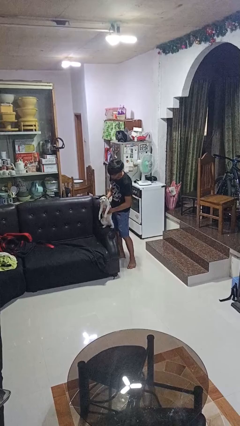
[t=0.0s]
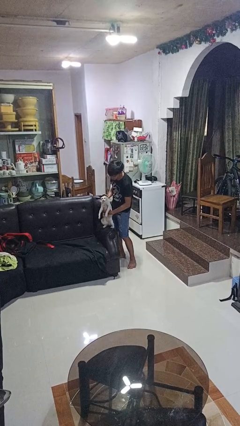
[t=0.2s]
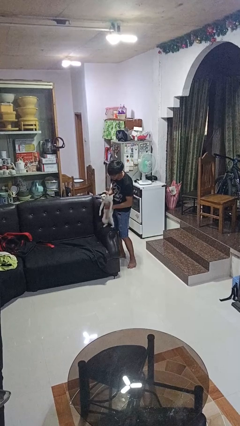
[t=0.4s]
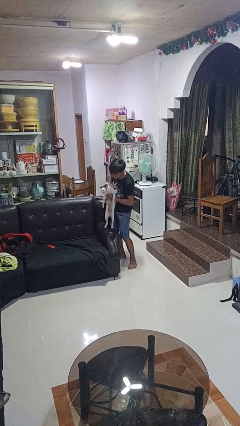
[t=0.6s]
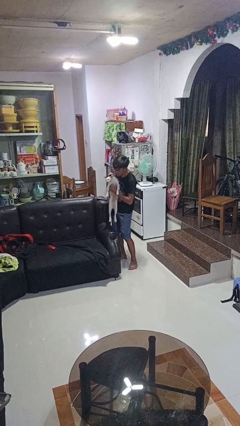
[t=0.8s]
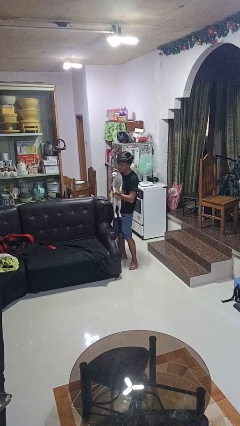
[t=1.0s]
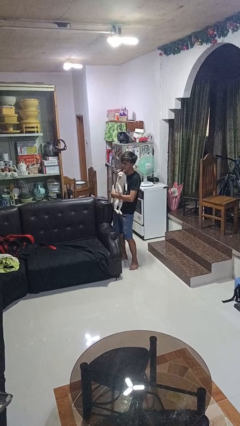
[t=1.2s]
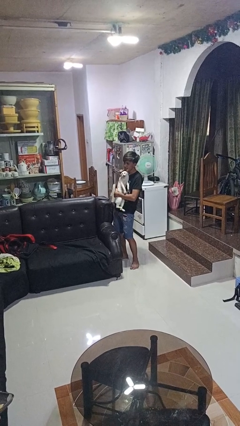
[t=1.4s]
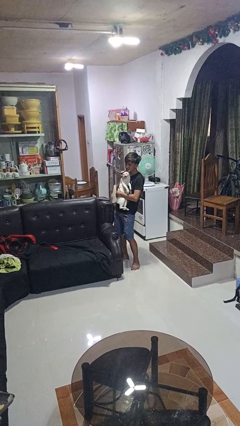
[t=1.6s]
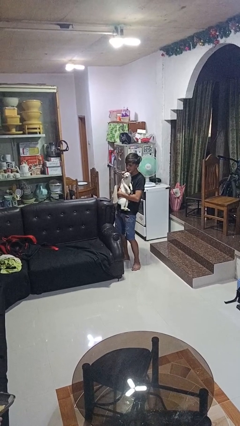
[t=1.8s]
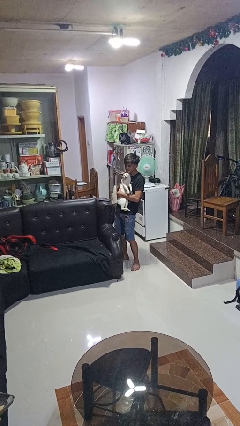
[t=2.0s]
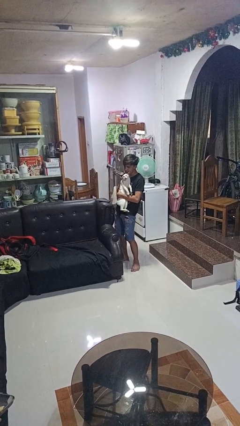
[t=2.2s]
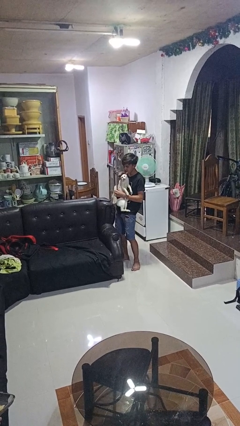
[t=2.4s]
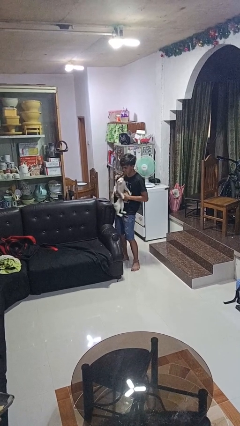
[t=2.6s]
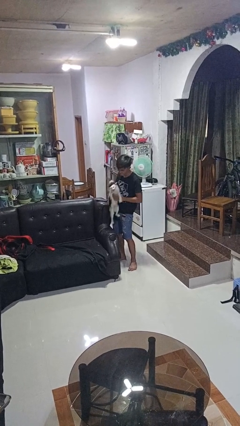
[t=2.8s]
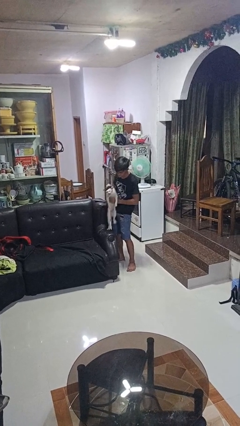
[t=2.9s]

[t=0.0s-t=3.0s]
person hugs cat

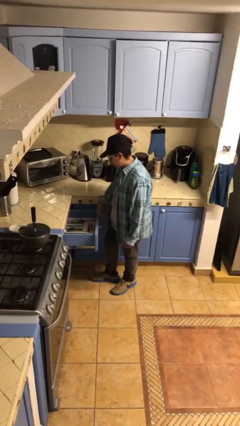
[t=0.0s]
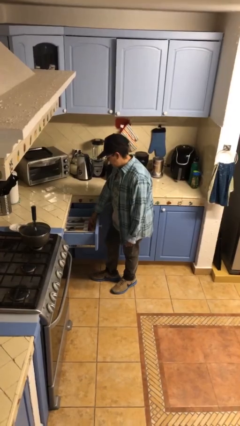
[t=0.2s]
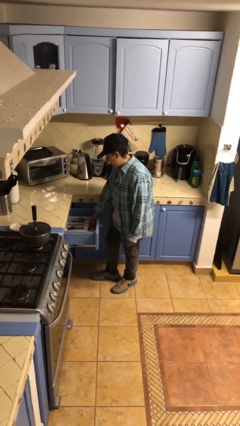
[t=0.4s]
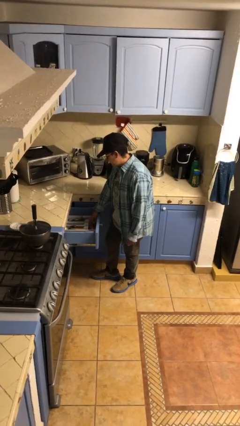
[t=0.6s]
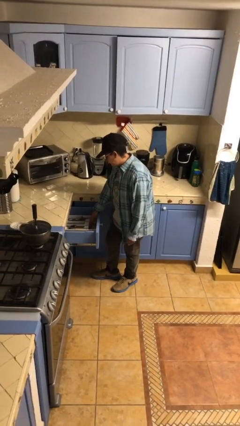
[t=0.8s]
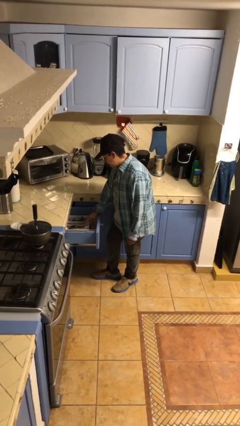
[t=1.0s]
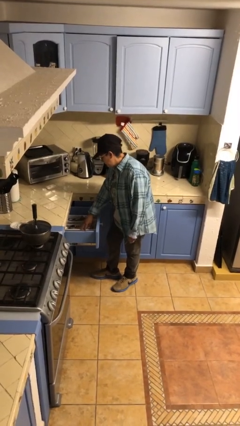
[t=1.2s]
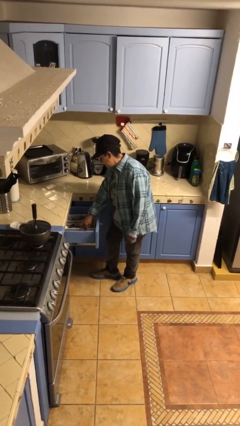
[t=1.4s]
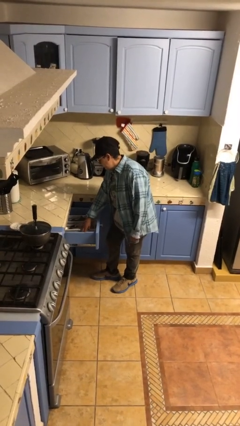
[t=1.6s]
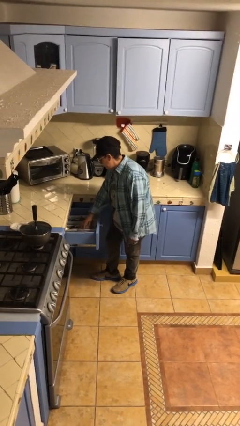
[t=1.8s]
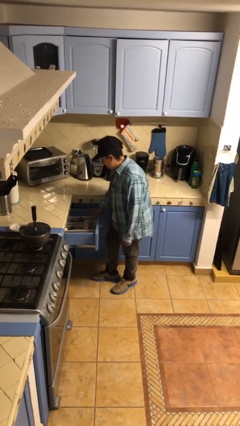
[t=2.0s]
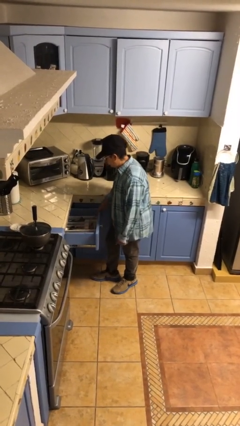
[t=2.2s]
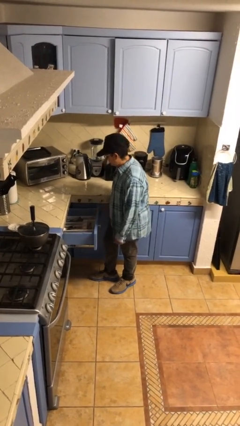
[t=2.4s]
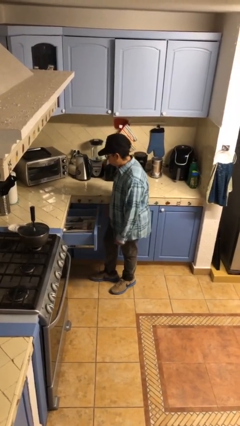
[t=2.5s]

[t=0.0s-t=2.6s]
person searches in kitchen drawer

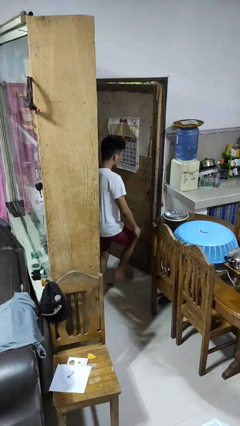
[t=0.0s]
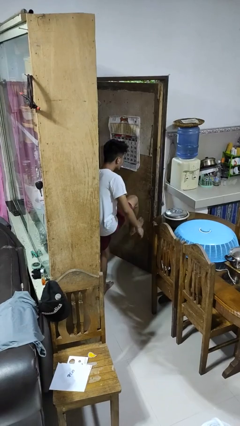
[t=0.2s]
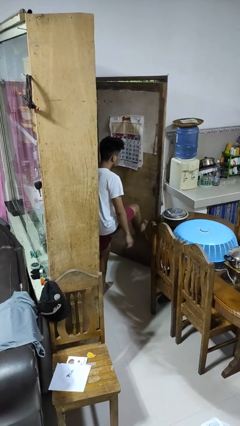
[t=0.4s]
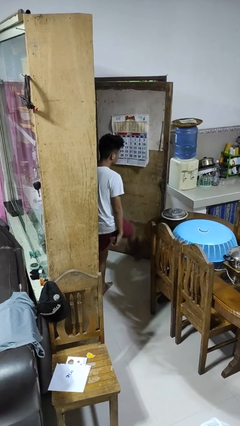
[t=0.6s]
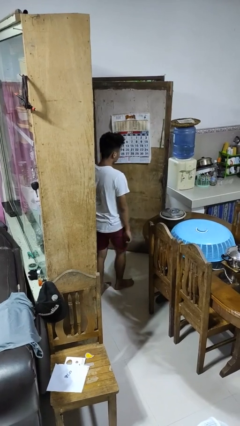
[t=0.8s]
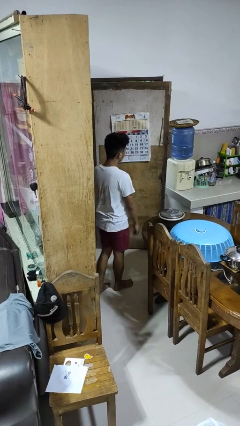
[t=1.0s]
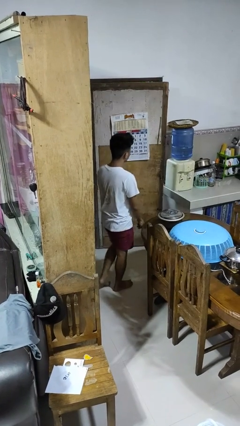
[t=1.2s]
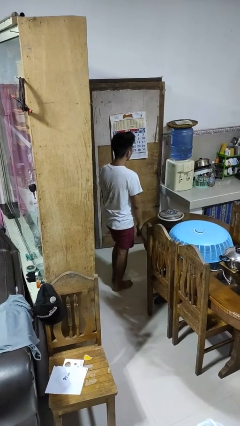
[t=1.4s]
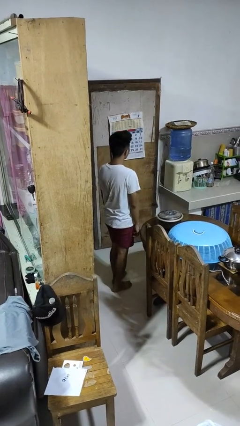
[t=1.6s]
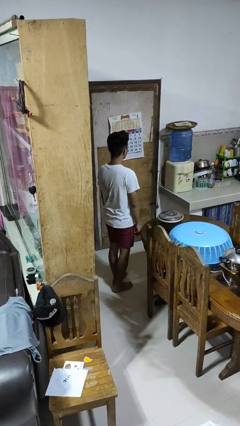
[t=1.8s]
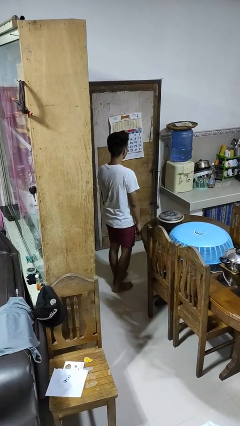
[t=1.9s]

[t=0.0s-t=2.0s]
person closes door with foot

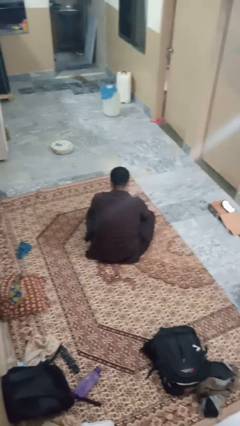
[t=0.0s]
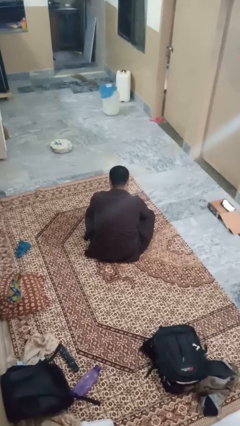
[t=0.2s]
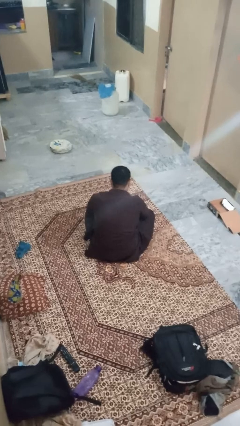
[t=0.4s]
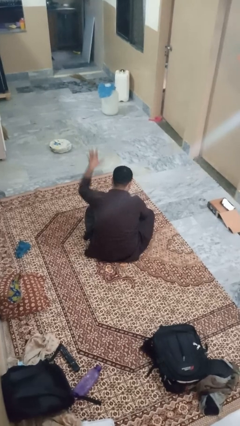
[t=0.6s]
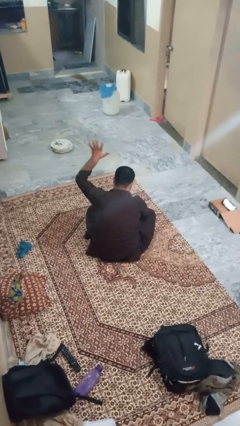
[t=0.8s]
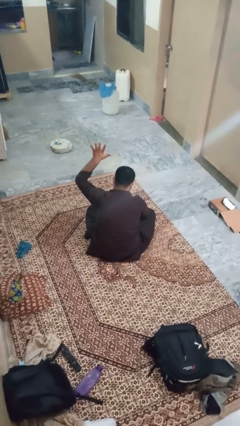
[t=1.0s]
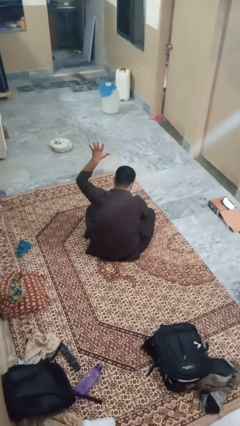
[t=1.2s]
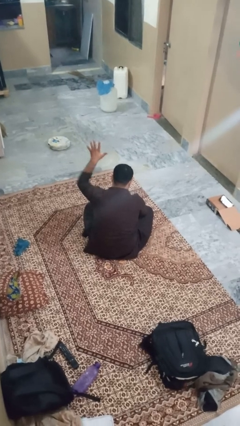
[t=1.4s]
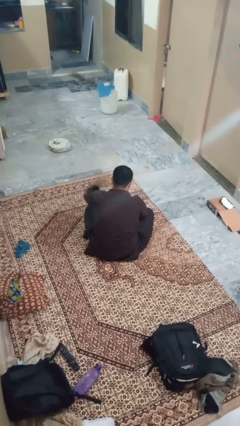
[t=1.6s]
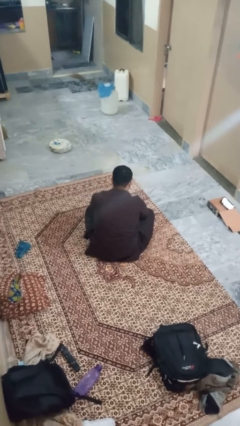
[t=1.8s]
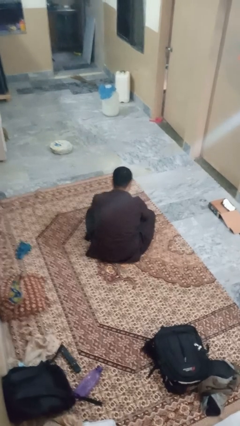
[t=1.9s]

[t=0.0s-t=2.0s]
person gestures number five

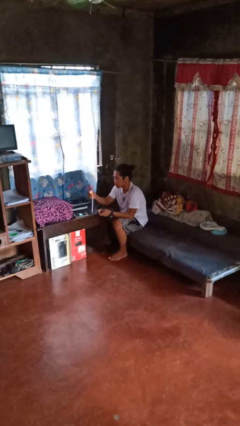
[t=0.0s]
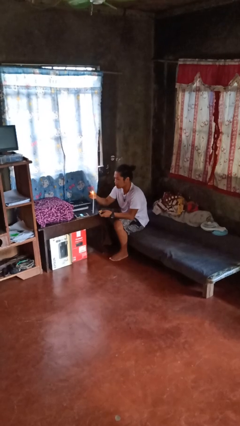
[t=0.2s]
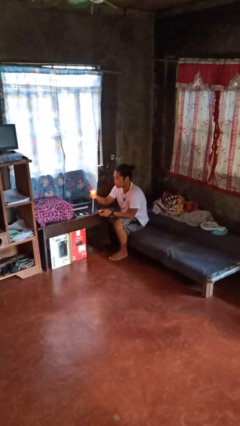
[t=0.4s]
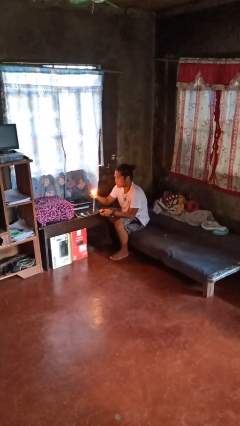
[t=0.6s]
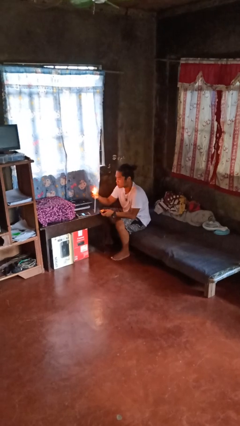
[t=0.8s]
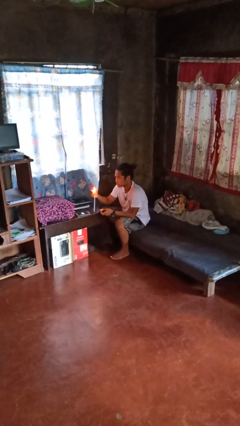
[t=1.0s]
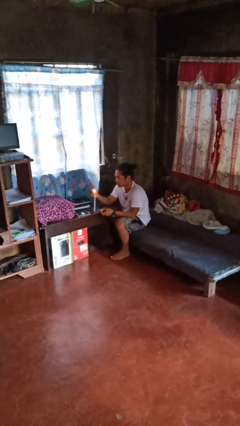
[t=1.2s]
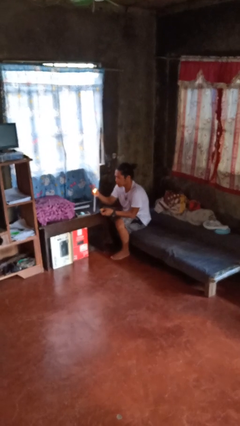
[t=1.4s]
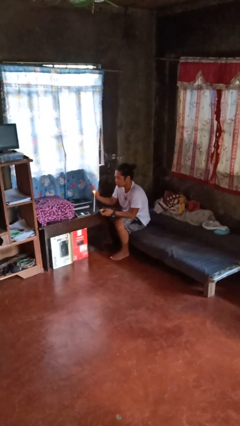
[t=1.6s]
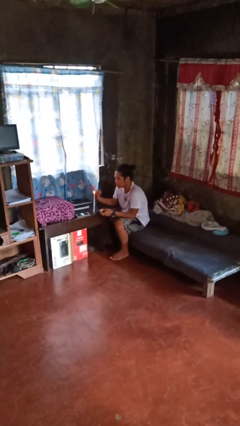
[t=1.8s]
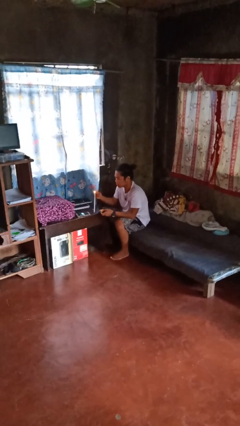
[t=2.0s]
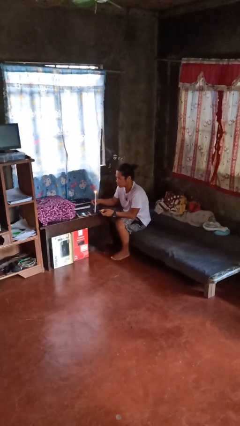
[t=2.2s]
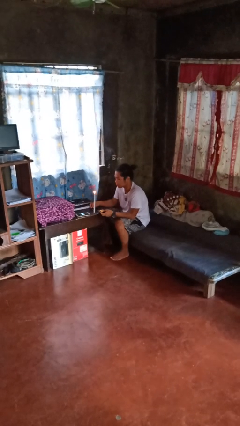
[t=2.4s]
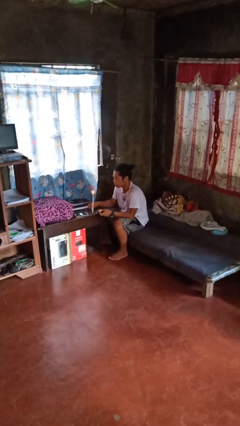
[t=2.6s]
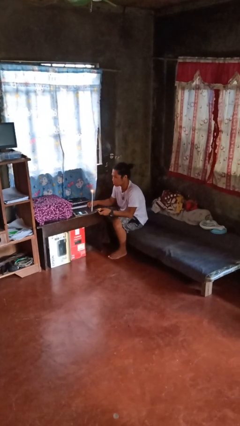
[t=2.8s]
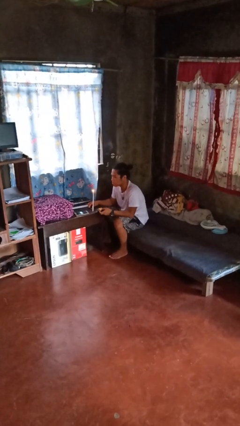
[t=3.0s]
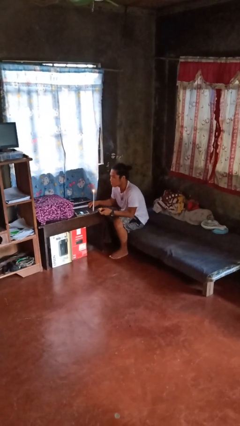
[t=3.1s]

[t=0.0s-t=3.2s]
person lights candle

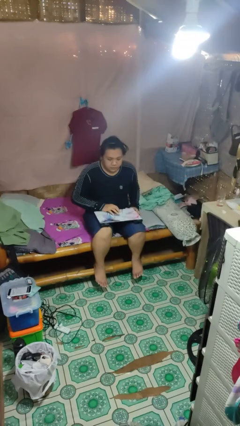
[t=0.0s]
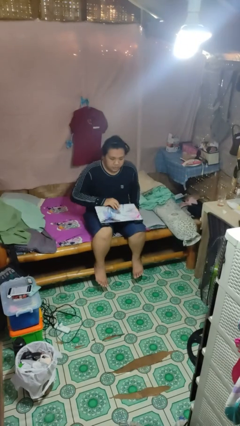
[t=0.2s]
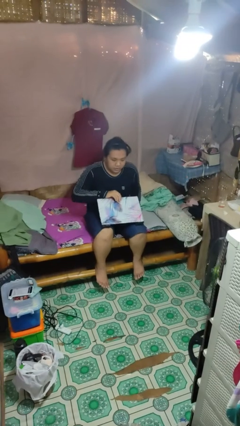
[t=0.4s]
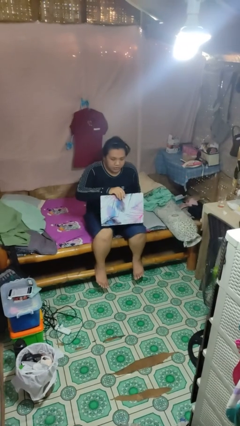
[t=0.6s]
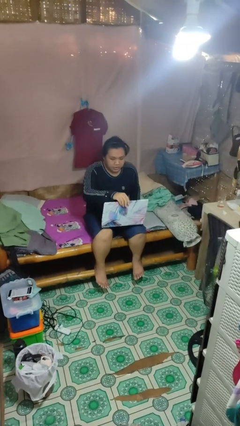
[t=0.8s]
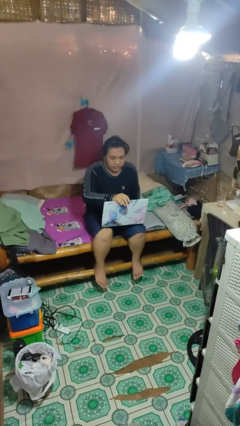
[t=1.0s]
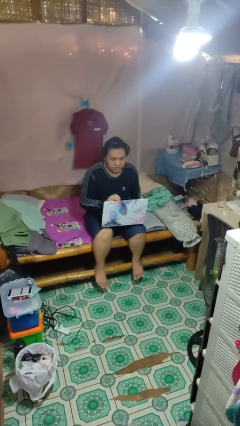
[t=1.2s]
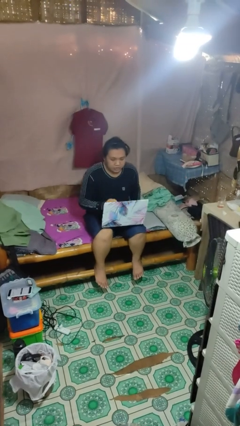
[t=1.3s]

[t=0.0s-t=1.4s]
person opens laptop

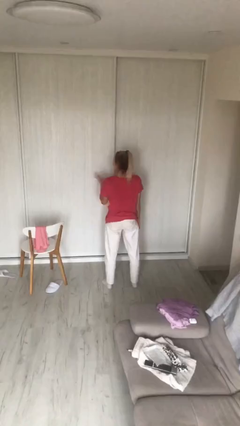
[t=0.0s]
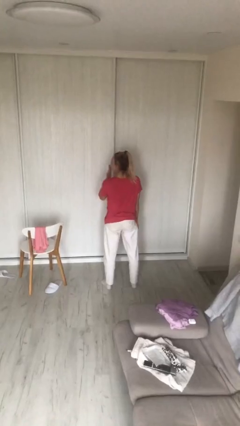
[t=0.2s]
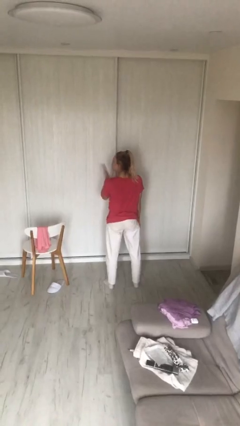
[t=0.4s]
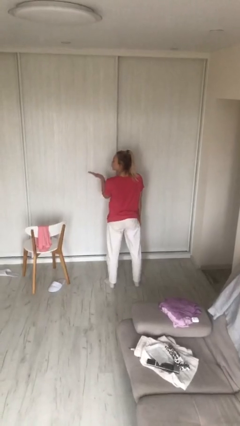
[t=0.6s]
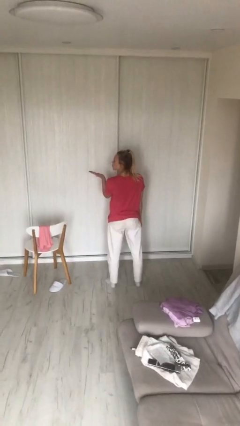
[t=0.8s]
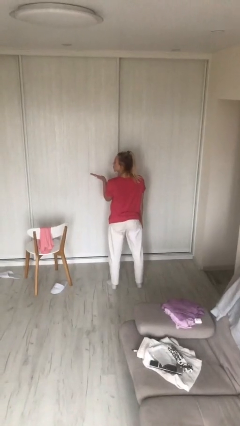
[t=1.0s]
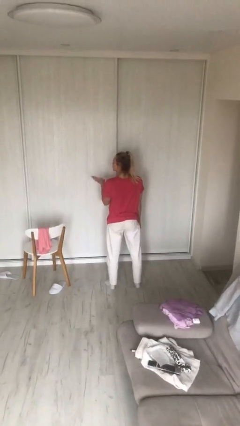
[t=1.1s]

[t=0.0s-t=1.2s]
person gestures blow kiss

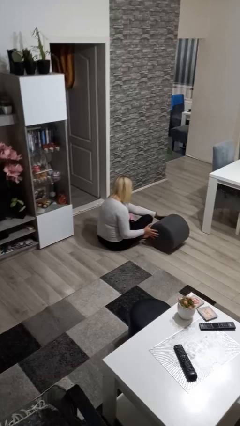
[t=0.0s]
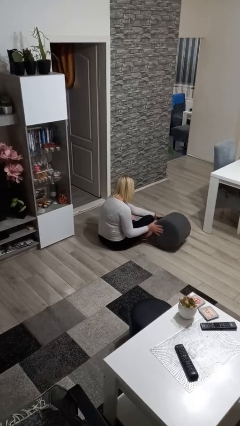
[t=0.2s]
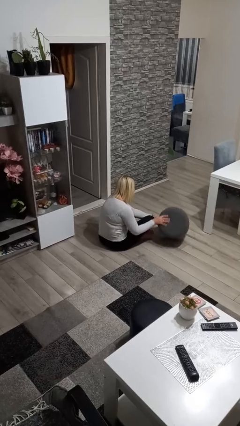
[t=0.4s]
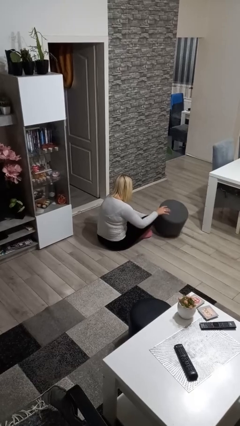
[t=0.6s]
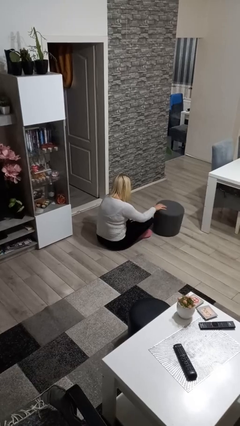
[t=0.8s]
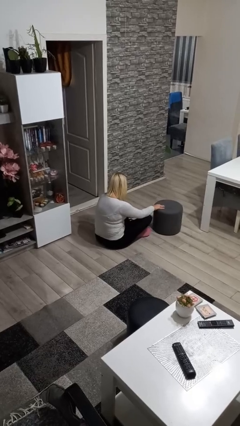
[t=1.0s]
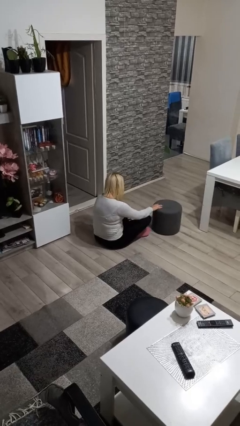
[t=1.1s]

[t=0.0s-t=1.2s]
person sets upright furniture

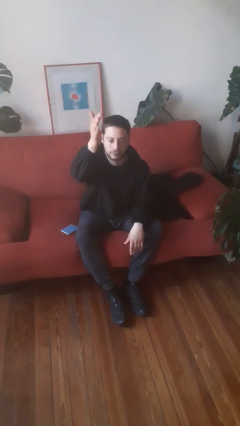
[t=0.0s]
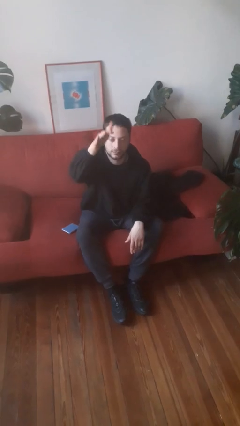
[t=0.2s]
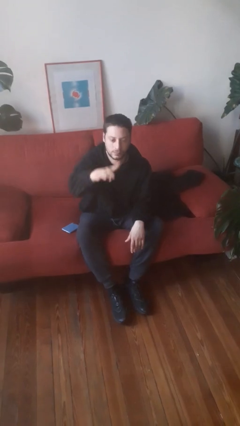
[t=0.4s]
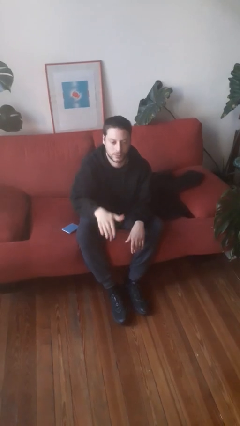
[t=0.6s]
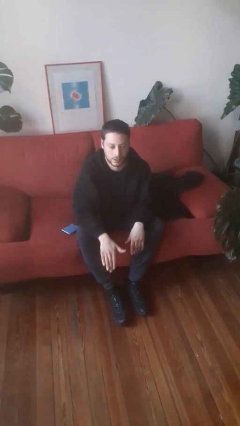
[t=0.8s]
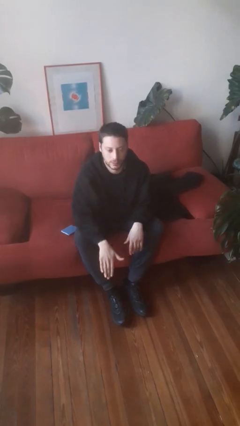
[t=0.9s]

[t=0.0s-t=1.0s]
person gestures swipe down
